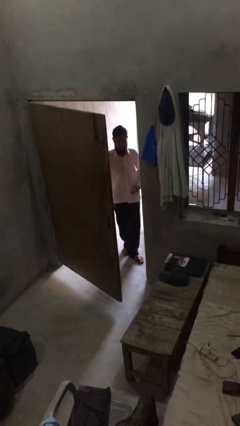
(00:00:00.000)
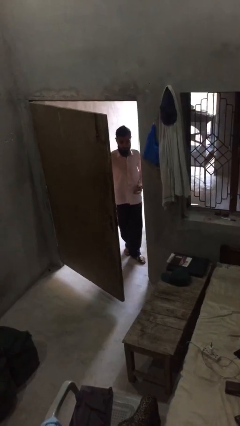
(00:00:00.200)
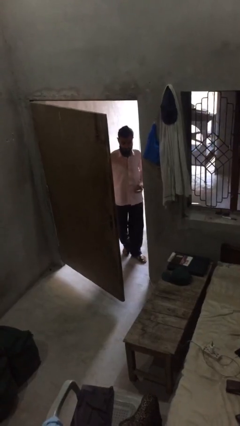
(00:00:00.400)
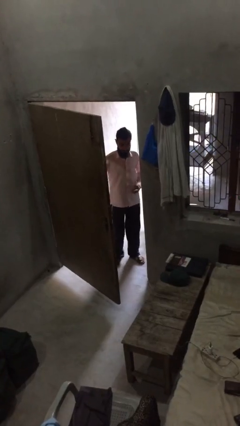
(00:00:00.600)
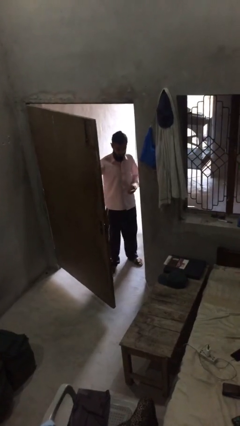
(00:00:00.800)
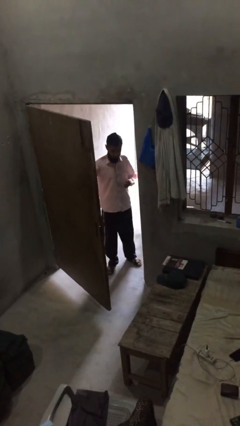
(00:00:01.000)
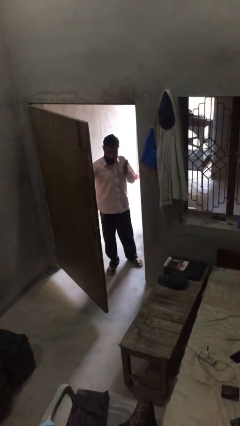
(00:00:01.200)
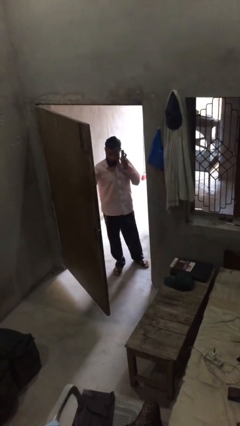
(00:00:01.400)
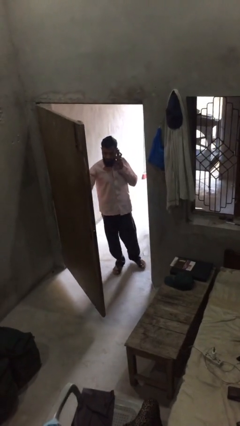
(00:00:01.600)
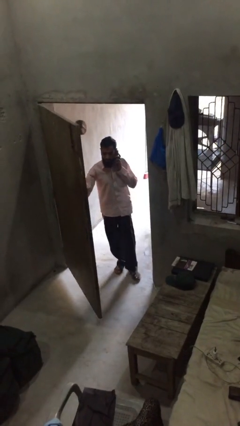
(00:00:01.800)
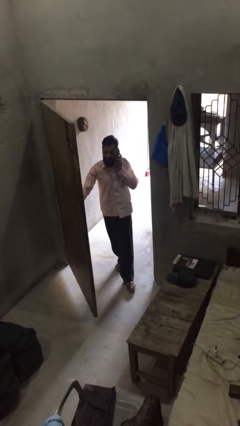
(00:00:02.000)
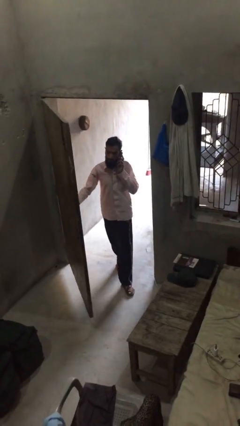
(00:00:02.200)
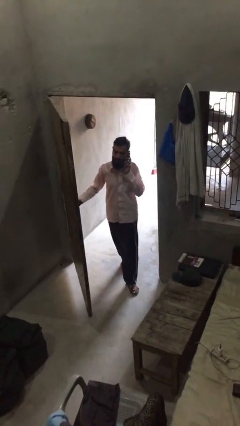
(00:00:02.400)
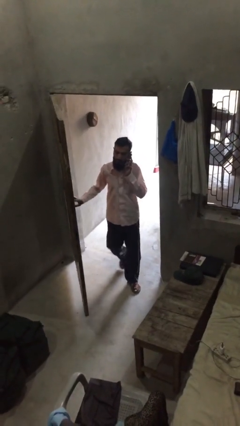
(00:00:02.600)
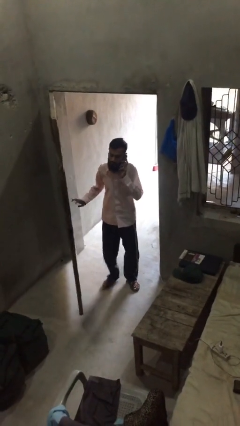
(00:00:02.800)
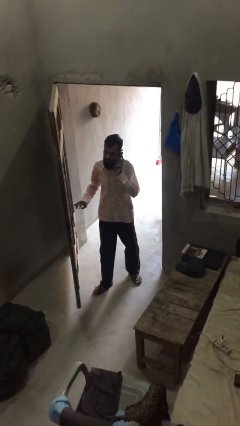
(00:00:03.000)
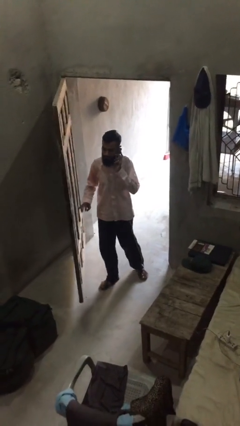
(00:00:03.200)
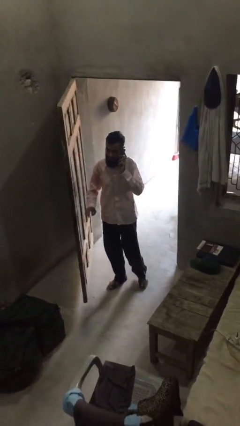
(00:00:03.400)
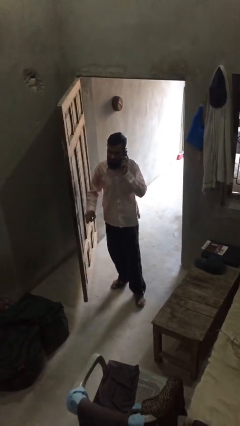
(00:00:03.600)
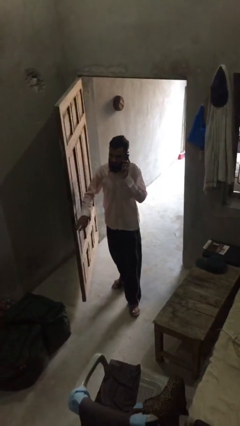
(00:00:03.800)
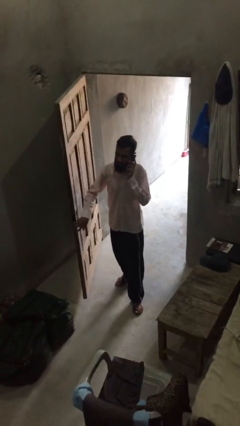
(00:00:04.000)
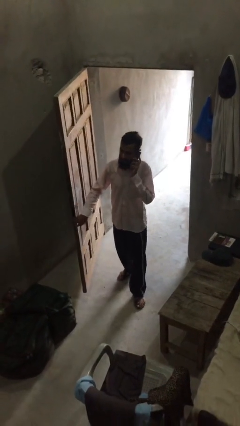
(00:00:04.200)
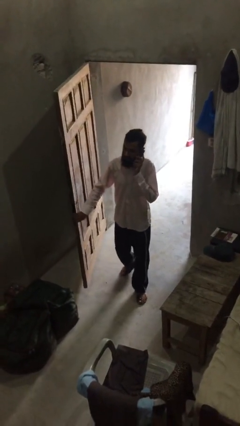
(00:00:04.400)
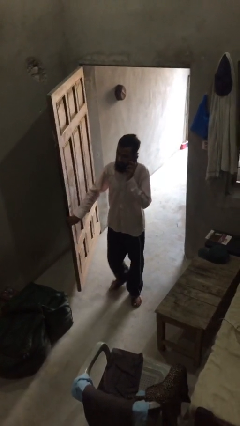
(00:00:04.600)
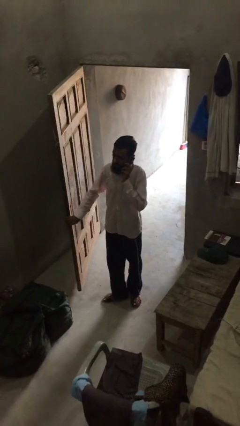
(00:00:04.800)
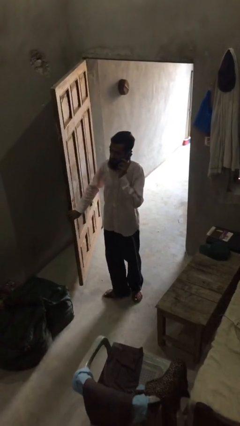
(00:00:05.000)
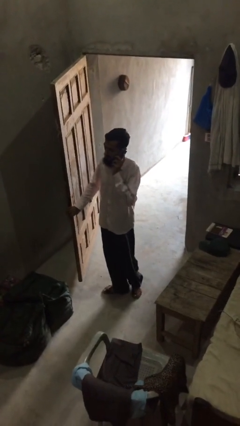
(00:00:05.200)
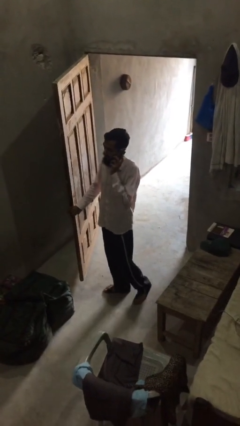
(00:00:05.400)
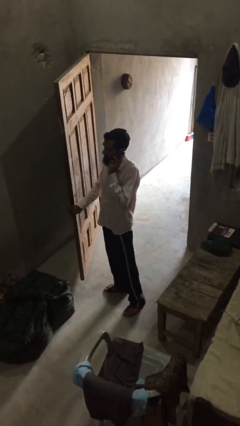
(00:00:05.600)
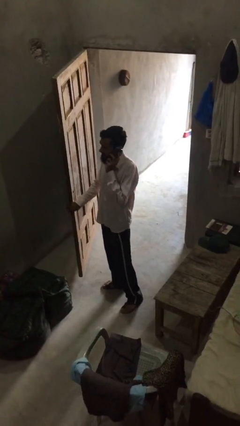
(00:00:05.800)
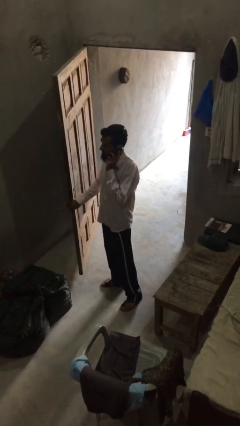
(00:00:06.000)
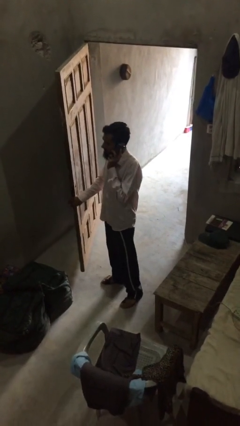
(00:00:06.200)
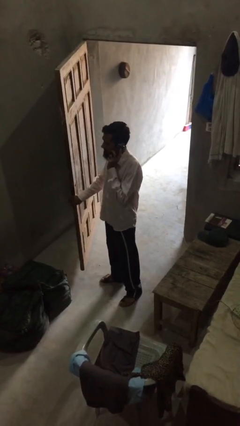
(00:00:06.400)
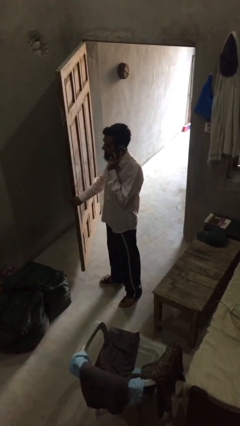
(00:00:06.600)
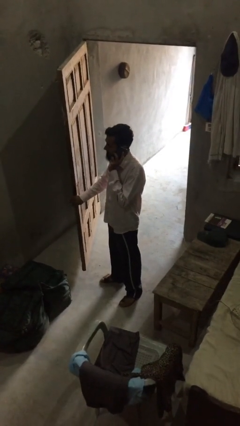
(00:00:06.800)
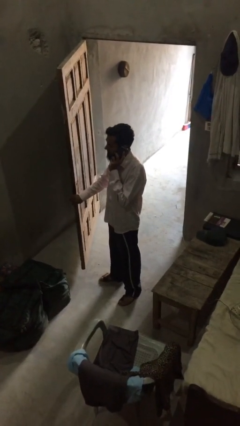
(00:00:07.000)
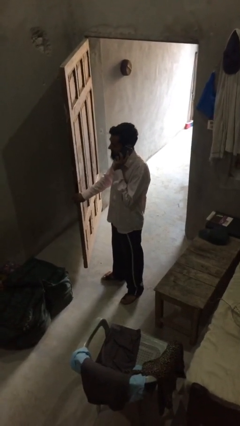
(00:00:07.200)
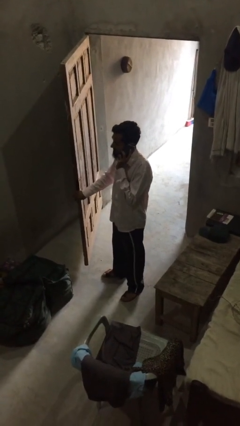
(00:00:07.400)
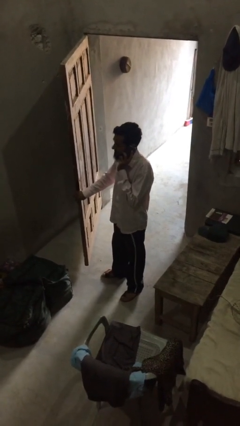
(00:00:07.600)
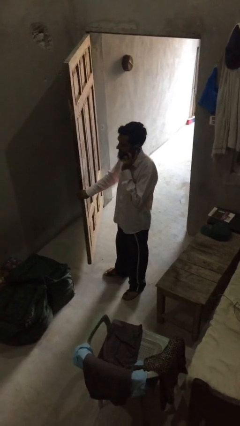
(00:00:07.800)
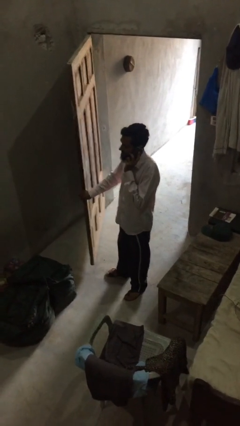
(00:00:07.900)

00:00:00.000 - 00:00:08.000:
person enters scene through structure

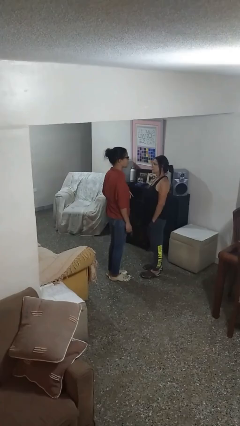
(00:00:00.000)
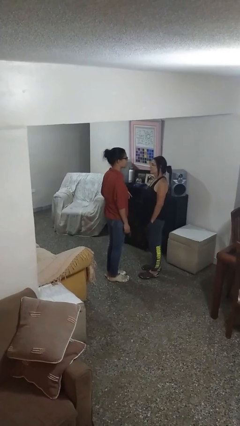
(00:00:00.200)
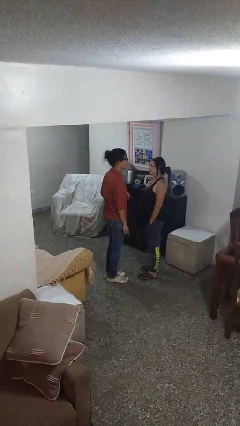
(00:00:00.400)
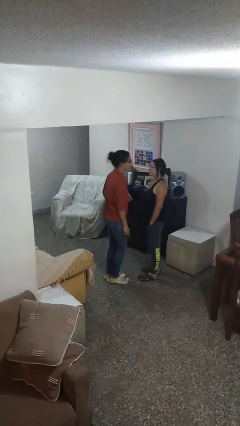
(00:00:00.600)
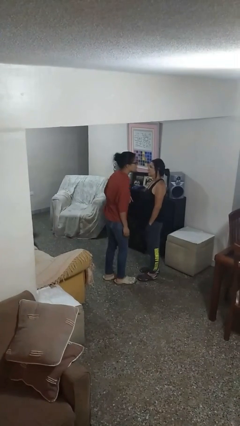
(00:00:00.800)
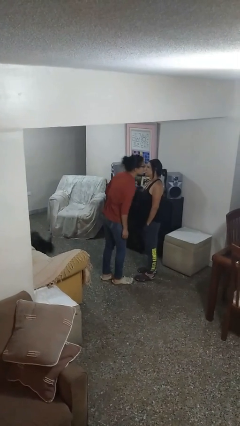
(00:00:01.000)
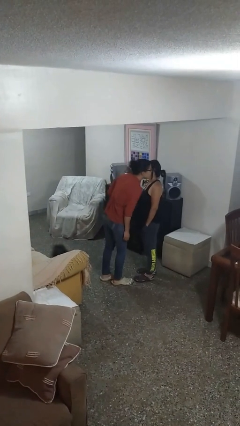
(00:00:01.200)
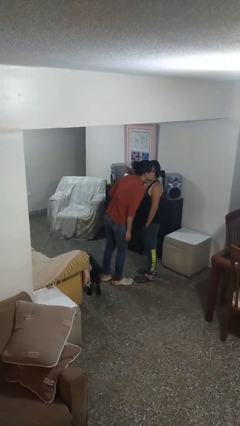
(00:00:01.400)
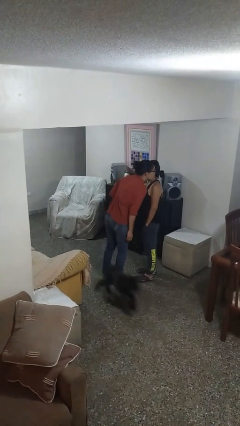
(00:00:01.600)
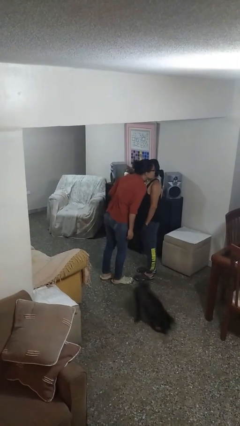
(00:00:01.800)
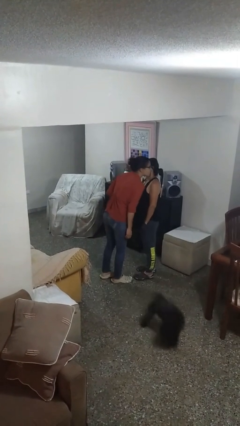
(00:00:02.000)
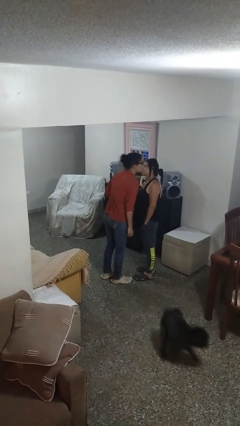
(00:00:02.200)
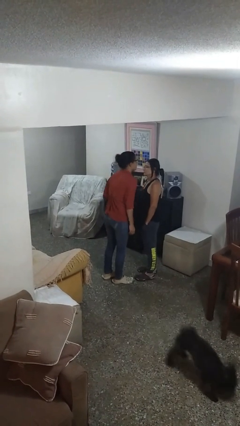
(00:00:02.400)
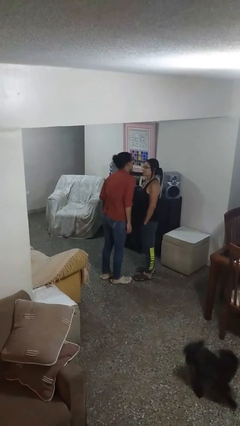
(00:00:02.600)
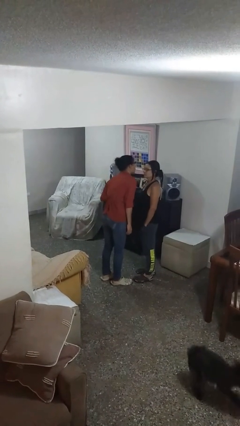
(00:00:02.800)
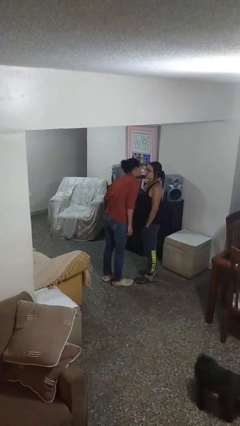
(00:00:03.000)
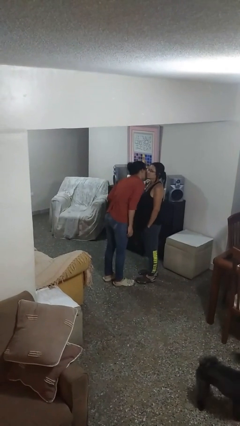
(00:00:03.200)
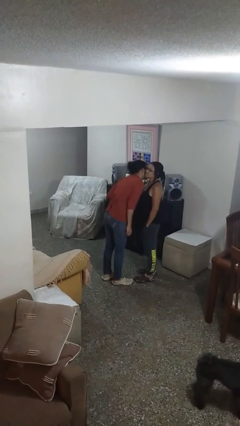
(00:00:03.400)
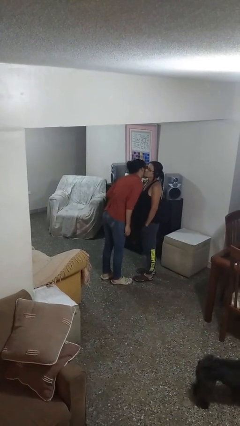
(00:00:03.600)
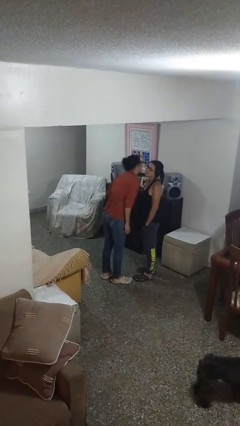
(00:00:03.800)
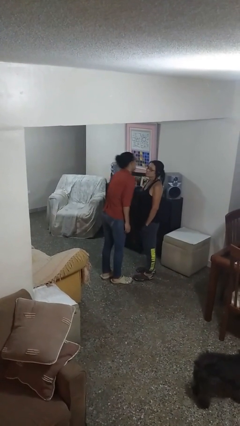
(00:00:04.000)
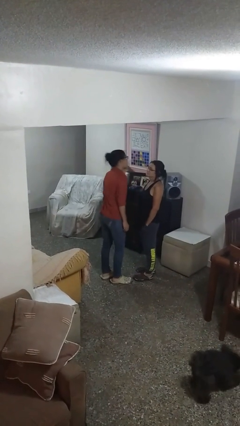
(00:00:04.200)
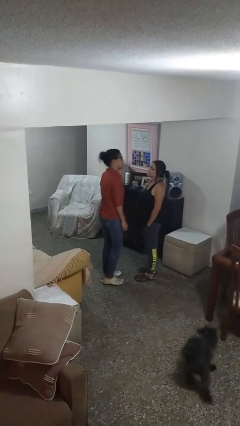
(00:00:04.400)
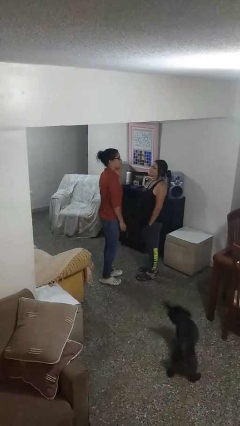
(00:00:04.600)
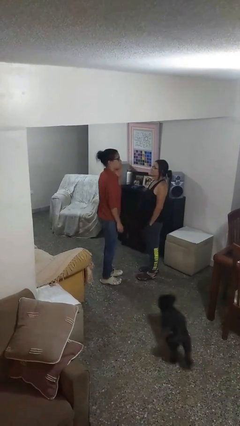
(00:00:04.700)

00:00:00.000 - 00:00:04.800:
person kisses cheek of person

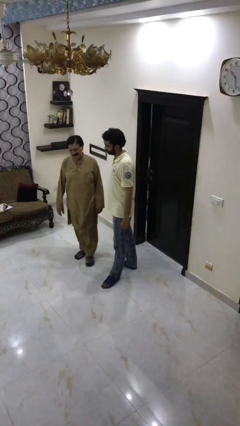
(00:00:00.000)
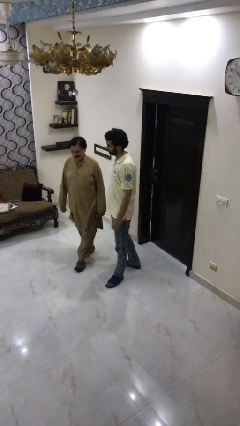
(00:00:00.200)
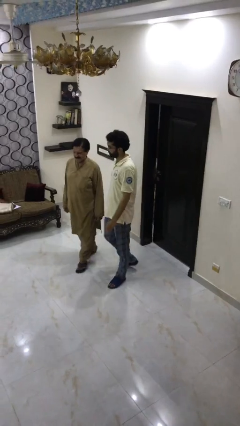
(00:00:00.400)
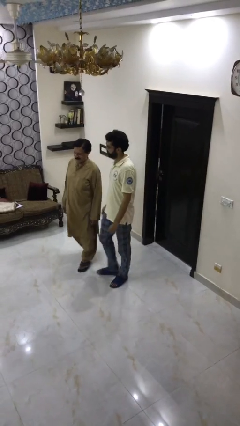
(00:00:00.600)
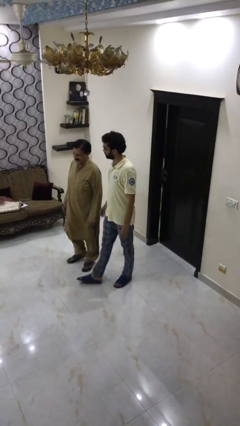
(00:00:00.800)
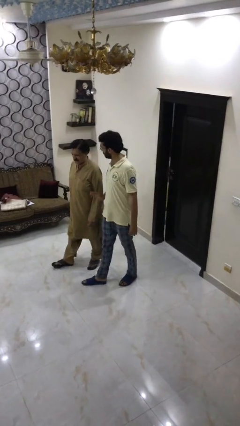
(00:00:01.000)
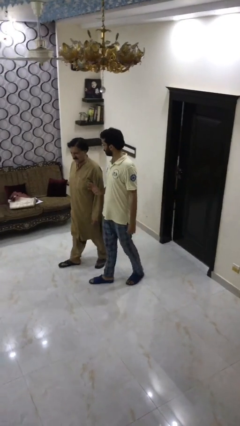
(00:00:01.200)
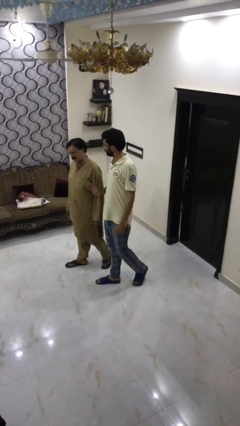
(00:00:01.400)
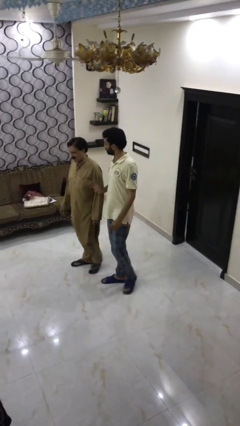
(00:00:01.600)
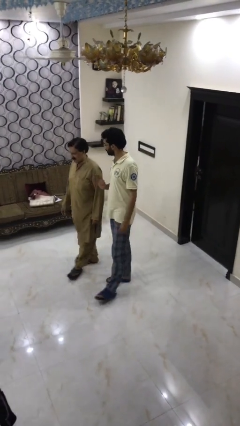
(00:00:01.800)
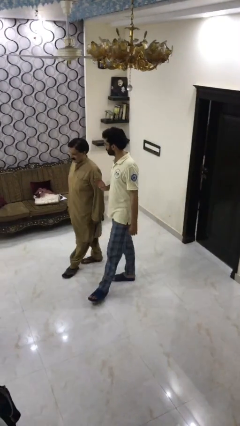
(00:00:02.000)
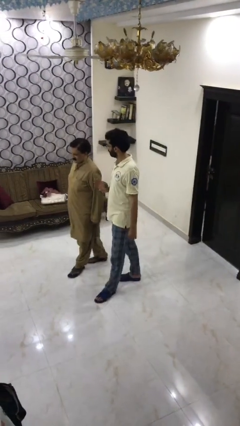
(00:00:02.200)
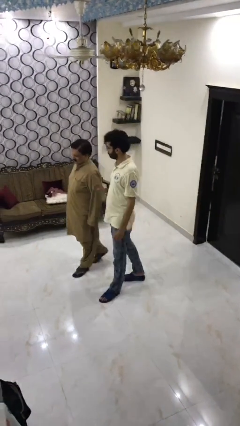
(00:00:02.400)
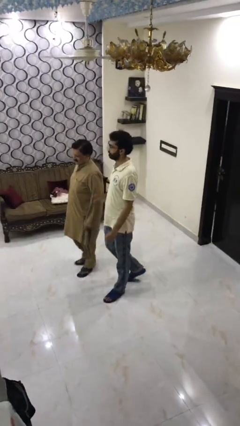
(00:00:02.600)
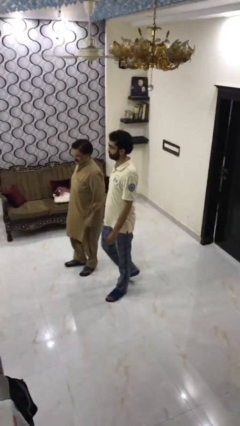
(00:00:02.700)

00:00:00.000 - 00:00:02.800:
person talks to person

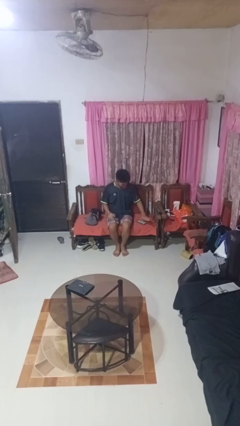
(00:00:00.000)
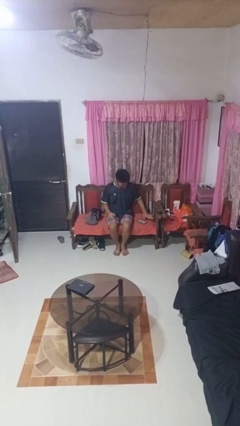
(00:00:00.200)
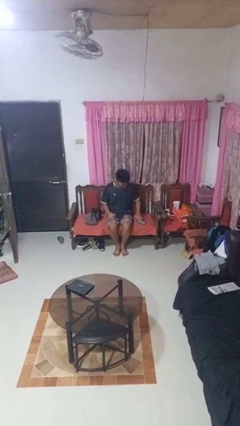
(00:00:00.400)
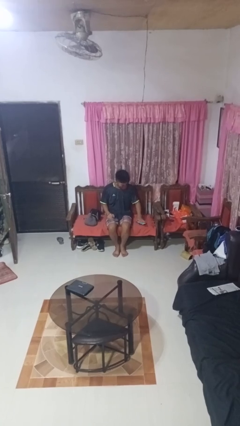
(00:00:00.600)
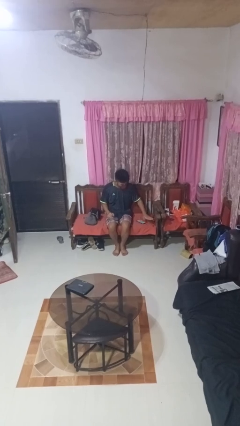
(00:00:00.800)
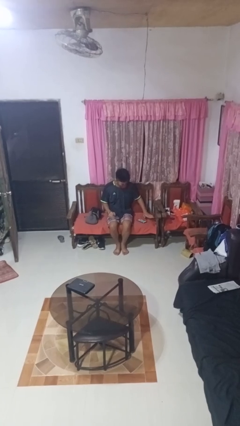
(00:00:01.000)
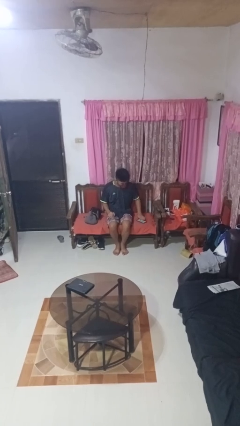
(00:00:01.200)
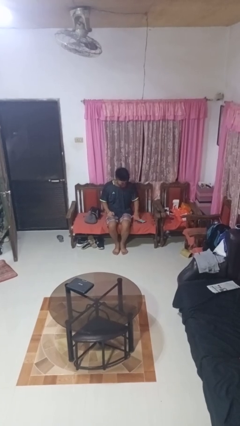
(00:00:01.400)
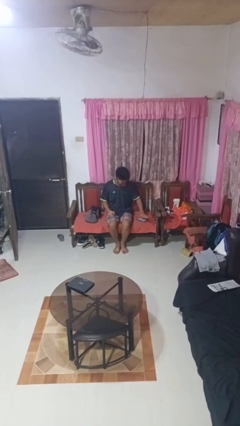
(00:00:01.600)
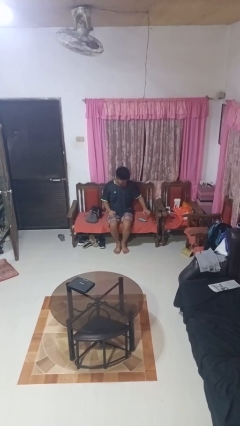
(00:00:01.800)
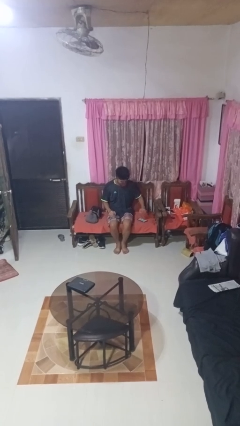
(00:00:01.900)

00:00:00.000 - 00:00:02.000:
person waves hand over object
